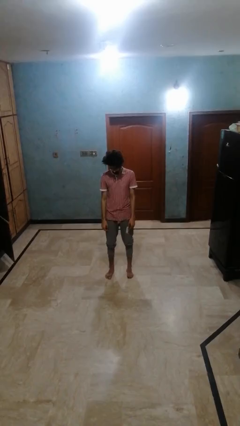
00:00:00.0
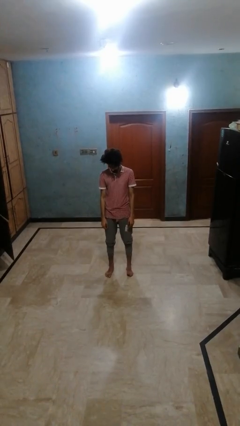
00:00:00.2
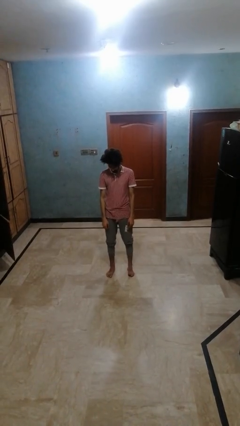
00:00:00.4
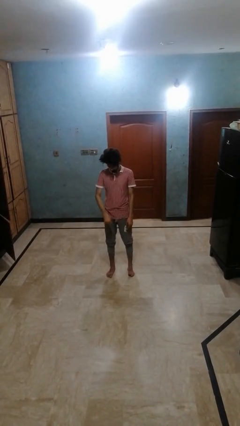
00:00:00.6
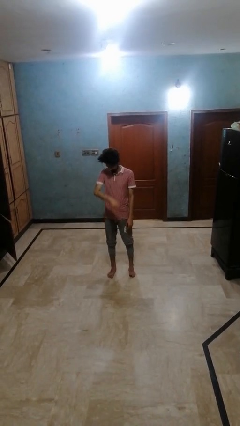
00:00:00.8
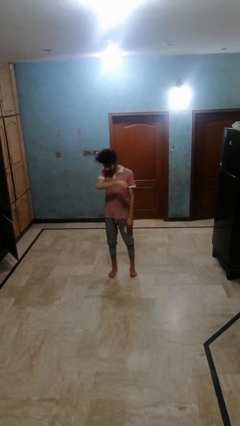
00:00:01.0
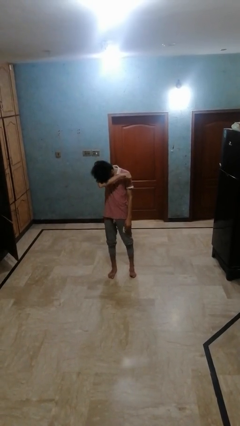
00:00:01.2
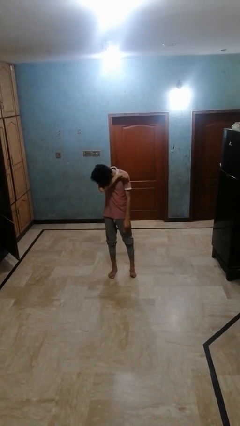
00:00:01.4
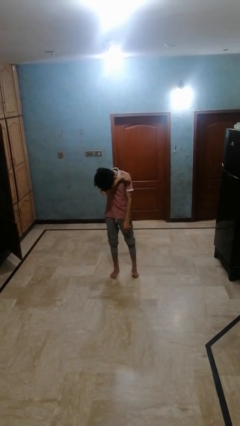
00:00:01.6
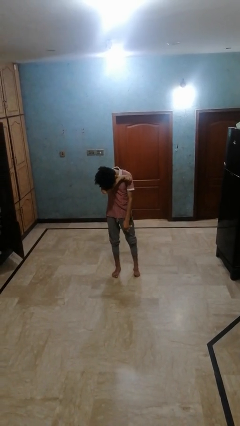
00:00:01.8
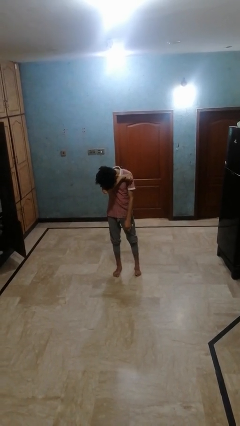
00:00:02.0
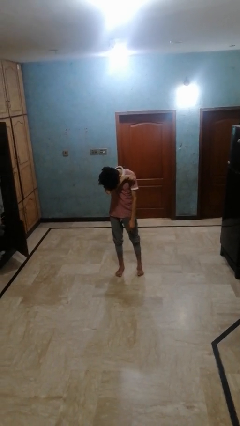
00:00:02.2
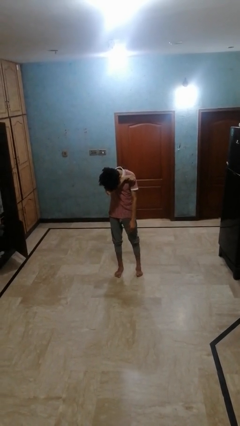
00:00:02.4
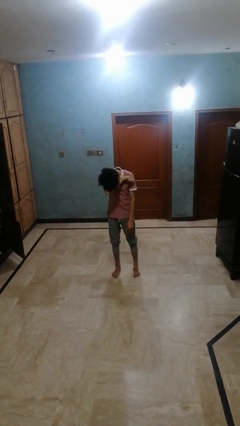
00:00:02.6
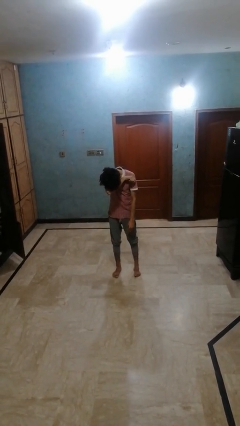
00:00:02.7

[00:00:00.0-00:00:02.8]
person sneezes into arm

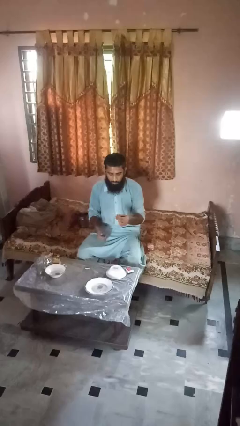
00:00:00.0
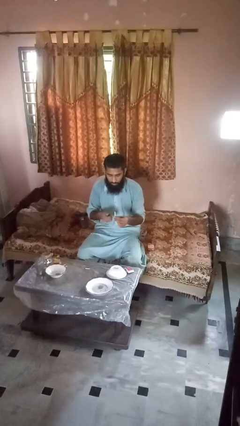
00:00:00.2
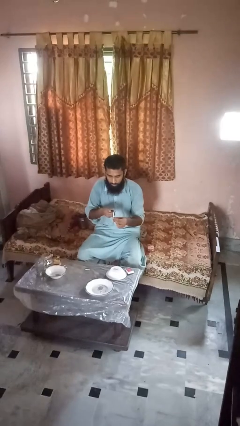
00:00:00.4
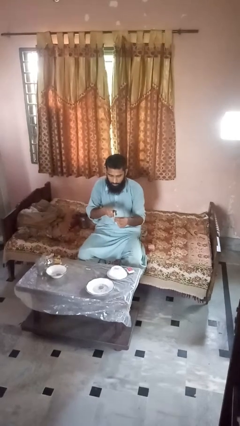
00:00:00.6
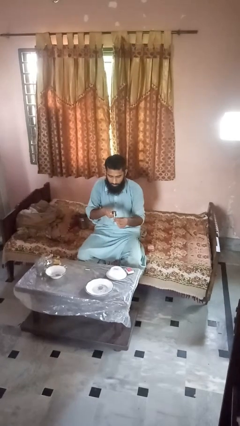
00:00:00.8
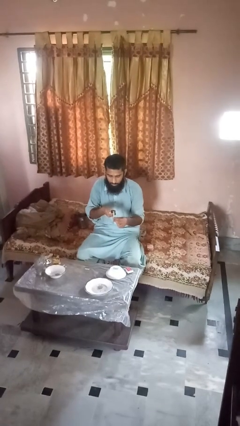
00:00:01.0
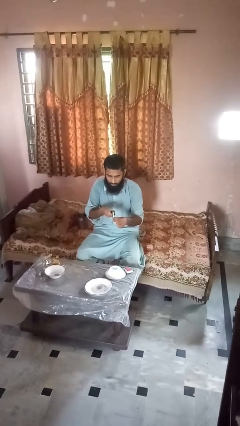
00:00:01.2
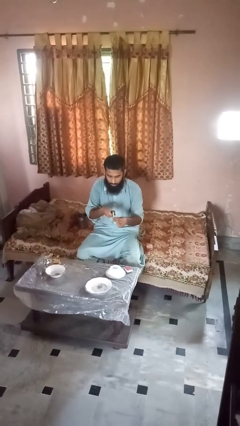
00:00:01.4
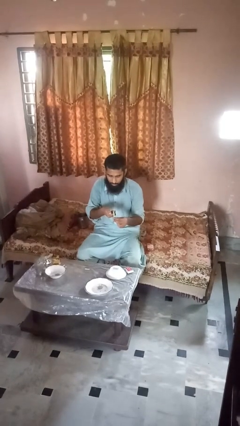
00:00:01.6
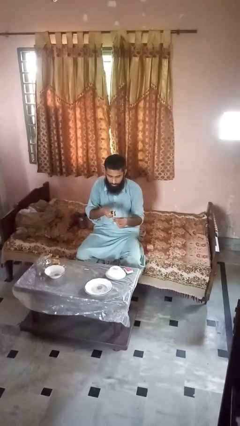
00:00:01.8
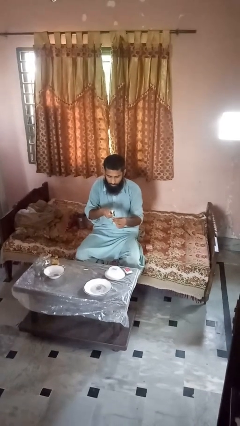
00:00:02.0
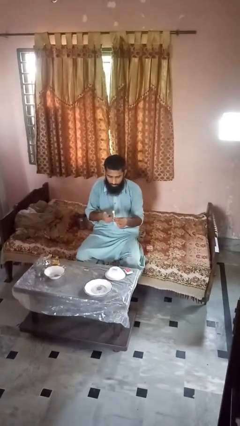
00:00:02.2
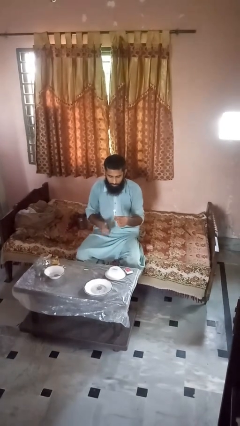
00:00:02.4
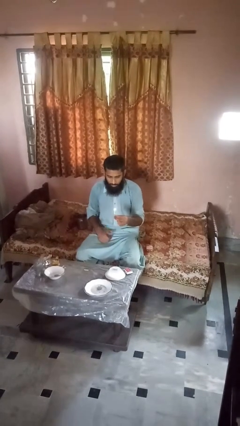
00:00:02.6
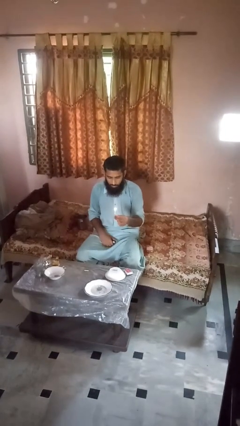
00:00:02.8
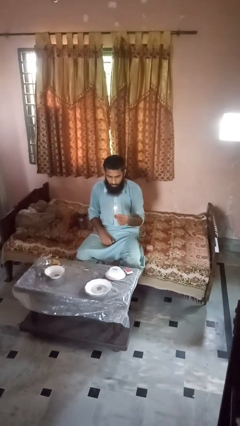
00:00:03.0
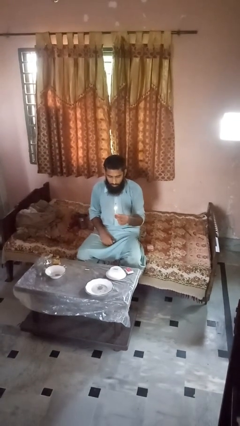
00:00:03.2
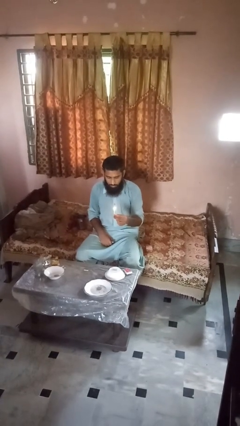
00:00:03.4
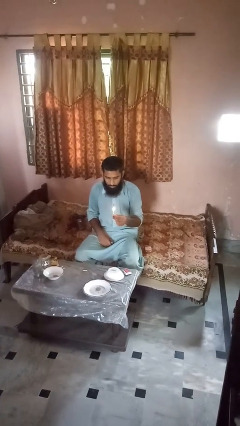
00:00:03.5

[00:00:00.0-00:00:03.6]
person lights candle

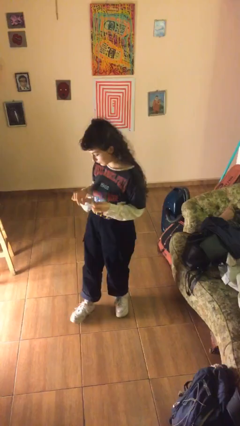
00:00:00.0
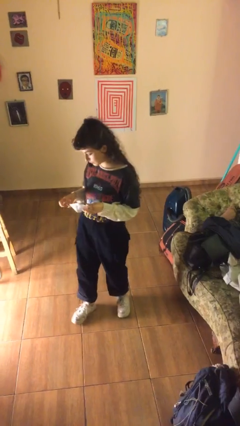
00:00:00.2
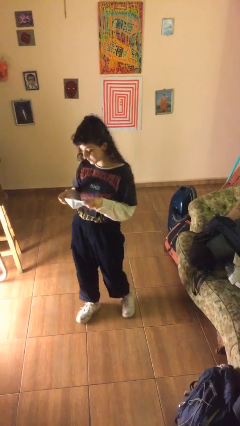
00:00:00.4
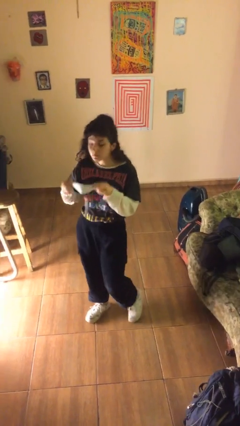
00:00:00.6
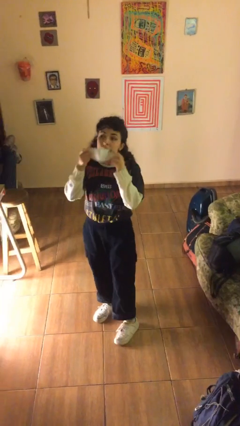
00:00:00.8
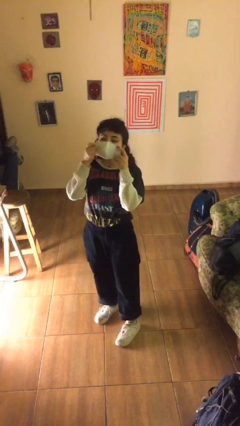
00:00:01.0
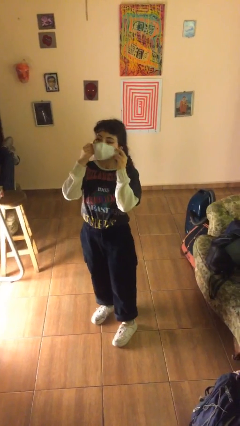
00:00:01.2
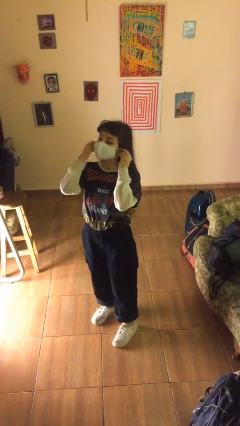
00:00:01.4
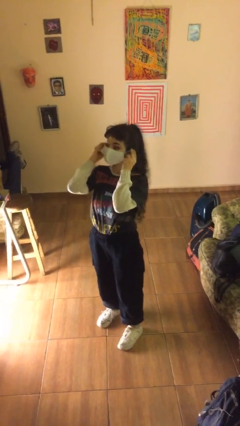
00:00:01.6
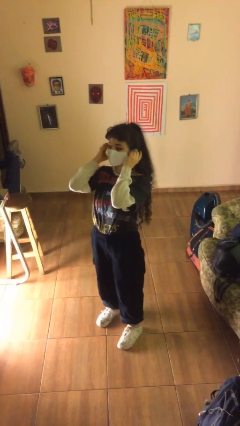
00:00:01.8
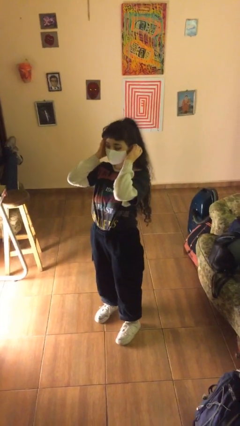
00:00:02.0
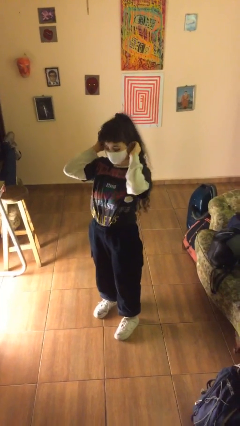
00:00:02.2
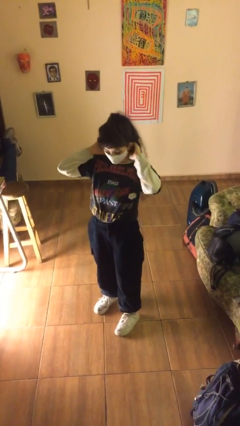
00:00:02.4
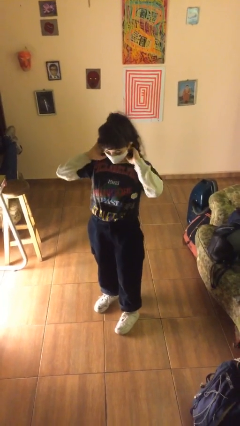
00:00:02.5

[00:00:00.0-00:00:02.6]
person puts on facemask

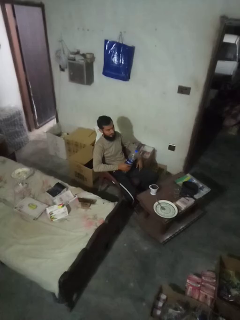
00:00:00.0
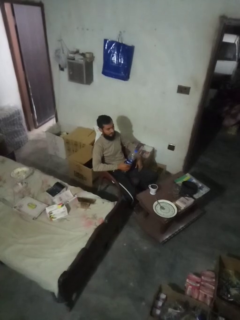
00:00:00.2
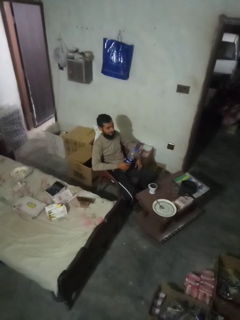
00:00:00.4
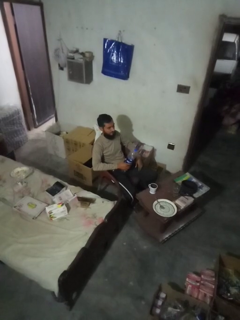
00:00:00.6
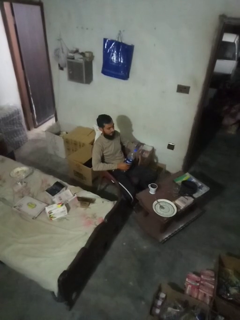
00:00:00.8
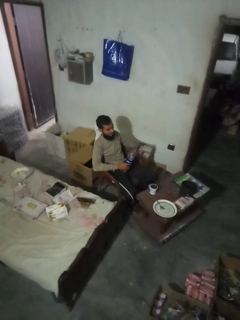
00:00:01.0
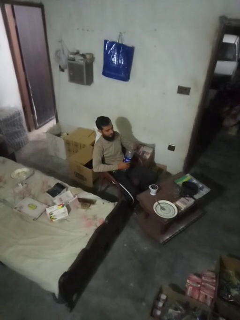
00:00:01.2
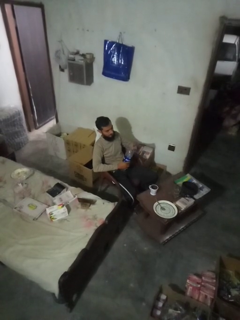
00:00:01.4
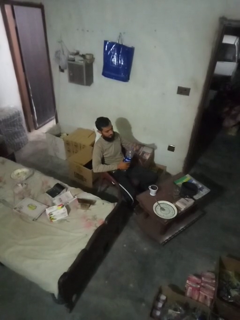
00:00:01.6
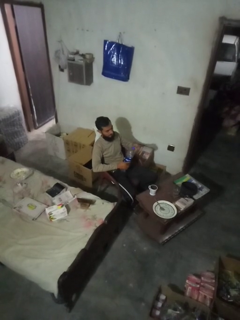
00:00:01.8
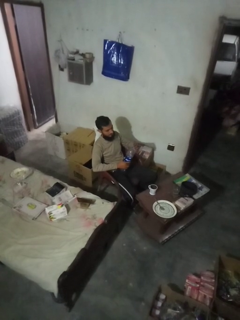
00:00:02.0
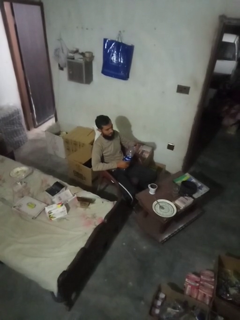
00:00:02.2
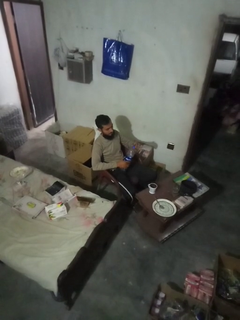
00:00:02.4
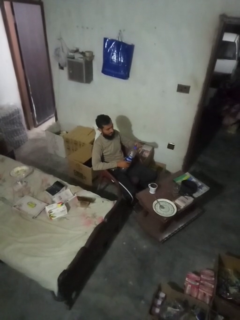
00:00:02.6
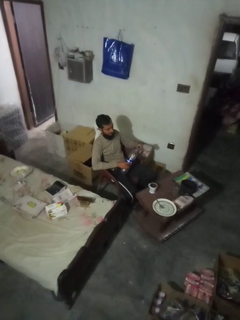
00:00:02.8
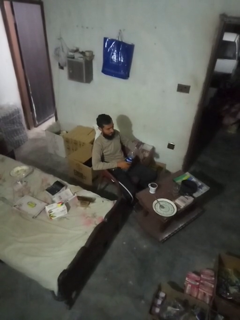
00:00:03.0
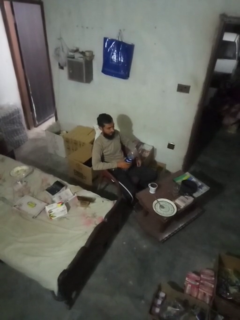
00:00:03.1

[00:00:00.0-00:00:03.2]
person unscrews lid from bottle

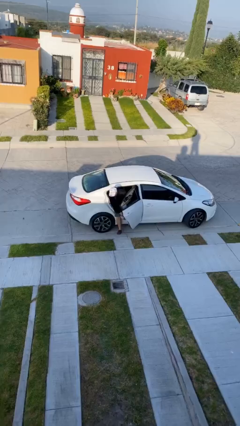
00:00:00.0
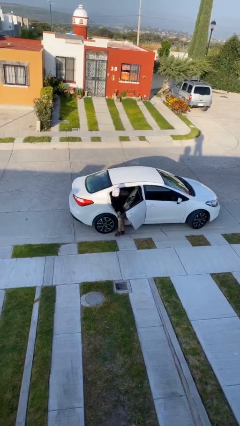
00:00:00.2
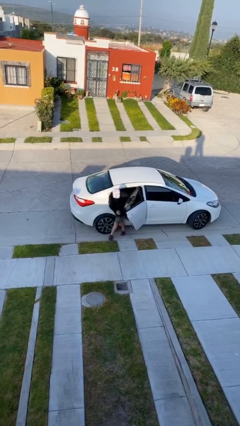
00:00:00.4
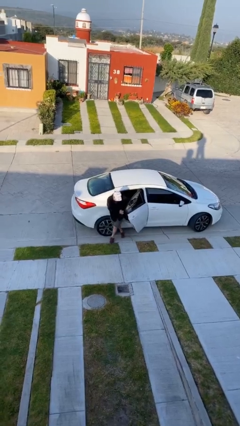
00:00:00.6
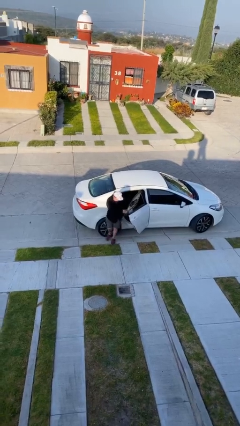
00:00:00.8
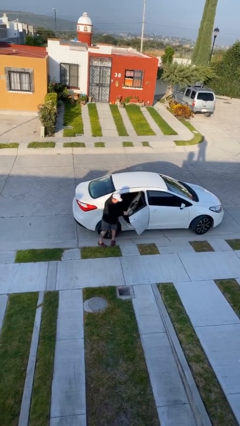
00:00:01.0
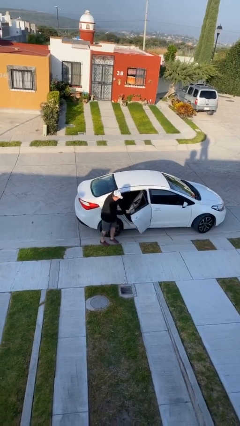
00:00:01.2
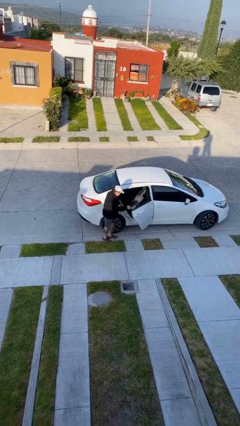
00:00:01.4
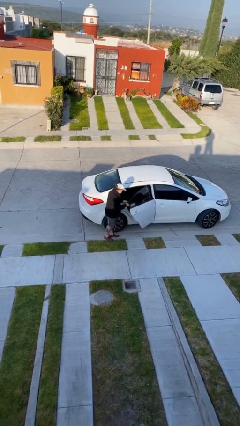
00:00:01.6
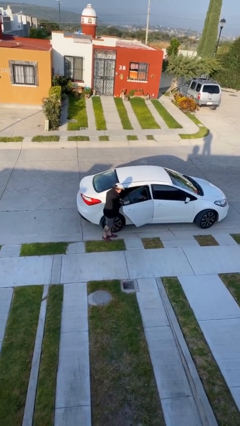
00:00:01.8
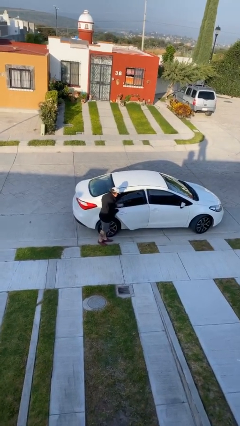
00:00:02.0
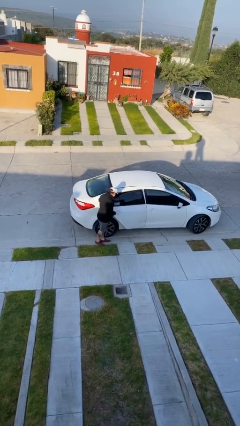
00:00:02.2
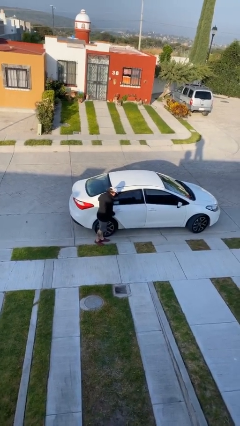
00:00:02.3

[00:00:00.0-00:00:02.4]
person exits car

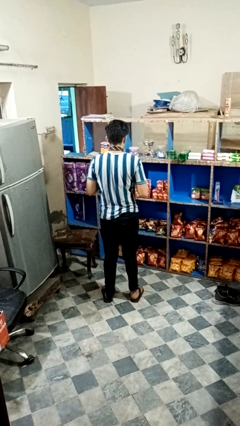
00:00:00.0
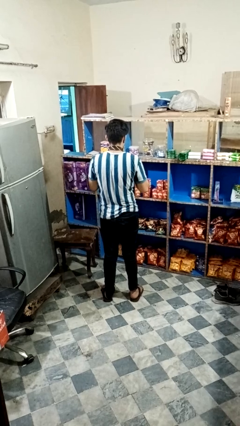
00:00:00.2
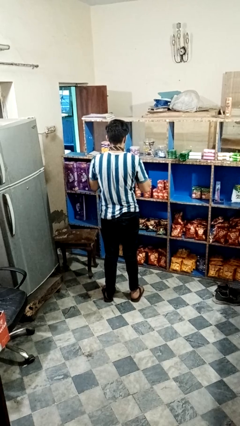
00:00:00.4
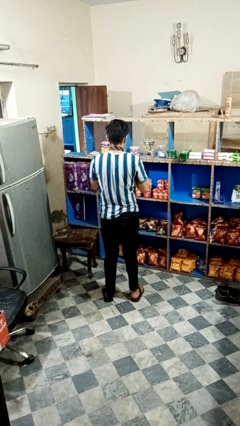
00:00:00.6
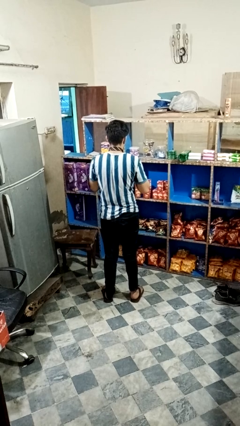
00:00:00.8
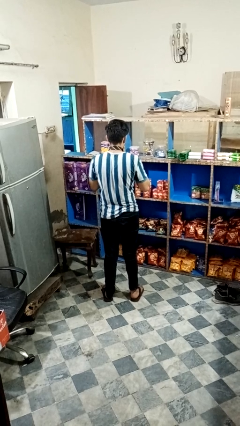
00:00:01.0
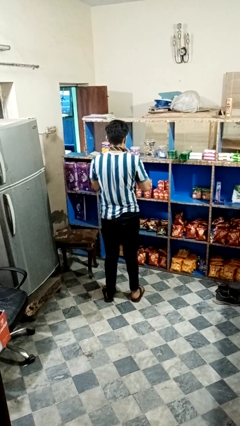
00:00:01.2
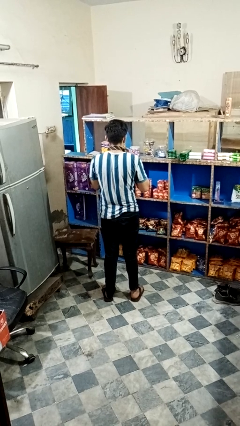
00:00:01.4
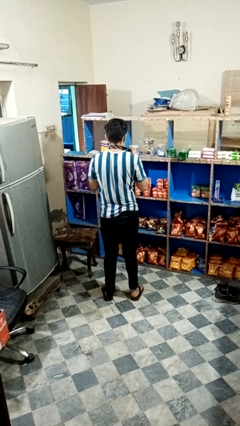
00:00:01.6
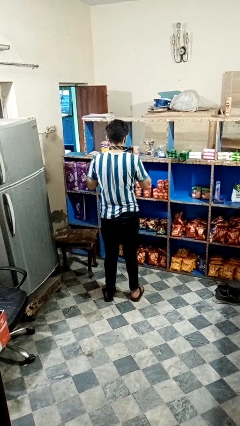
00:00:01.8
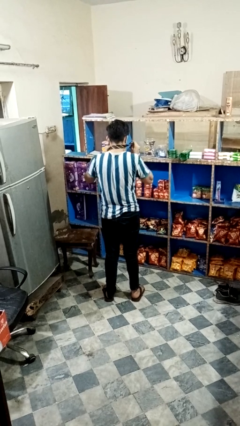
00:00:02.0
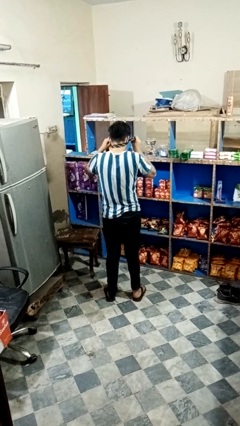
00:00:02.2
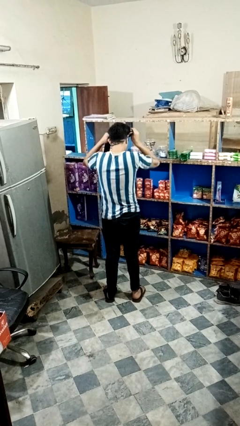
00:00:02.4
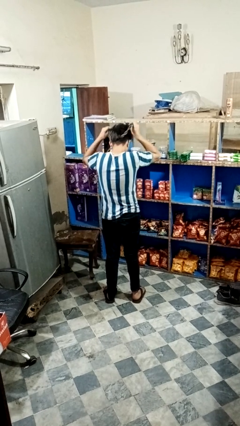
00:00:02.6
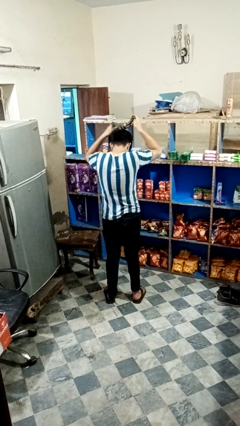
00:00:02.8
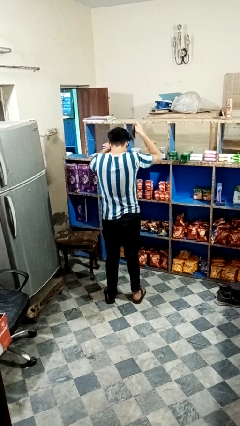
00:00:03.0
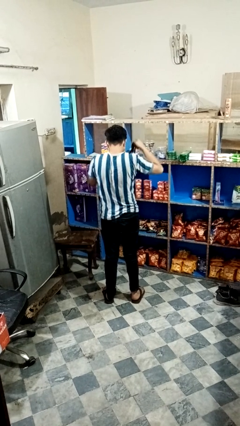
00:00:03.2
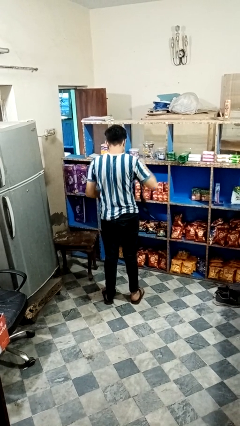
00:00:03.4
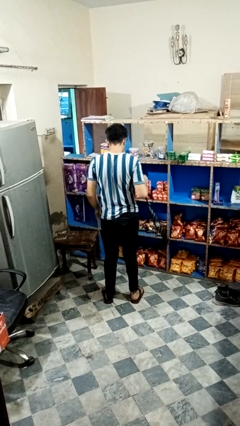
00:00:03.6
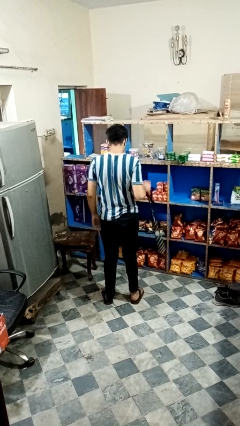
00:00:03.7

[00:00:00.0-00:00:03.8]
person takes off necktie

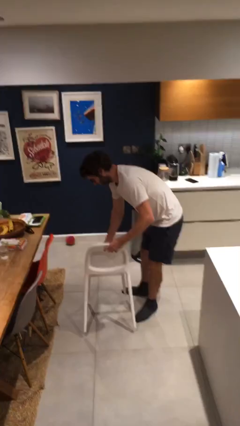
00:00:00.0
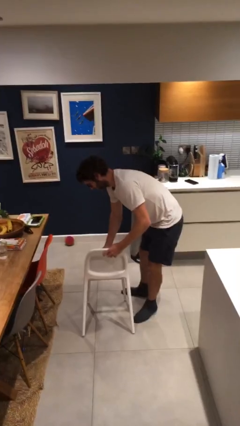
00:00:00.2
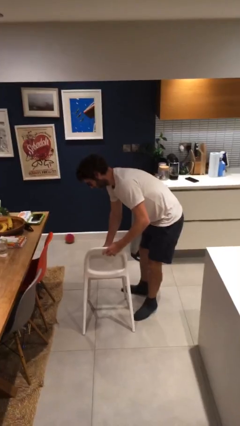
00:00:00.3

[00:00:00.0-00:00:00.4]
person puts down object on floor
